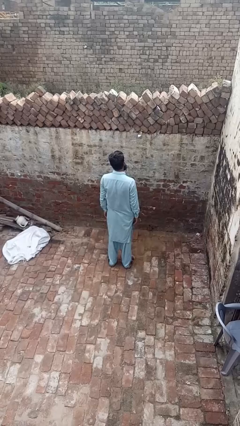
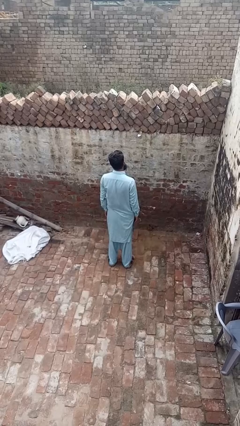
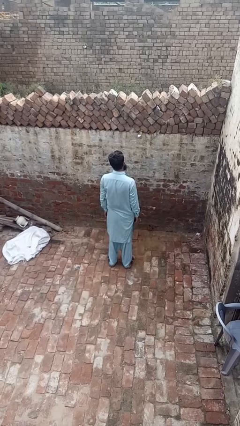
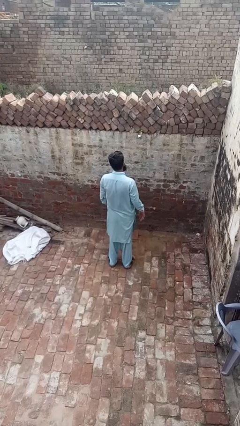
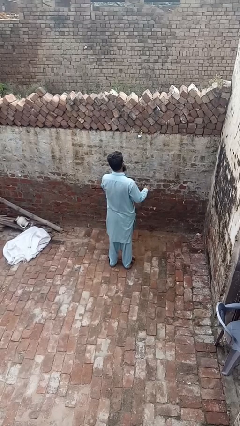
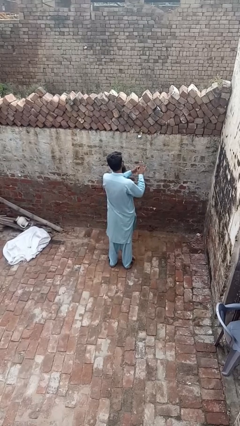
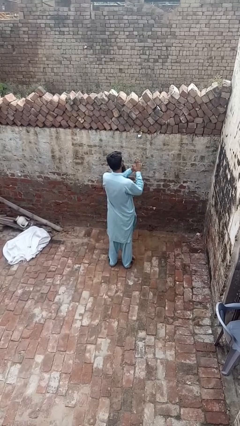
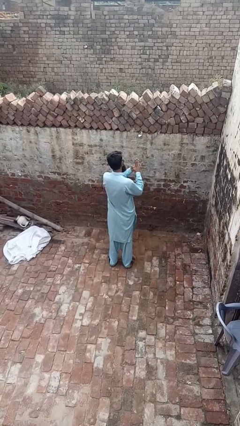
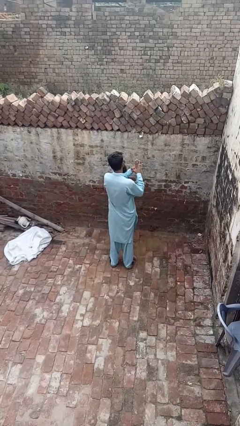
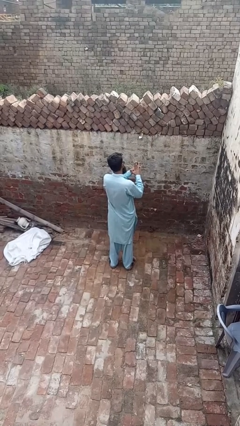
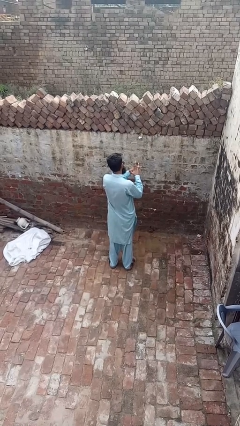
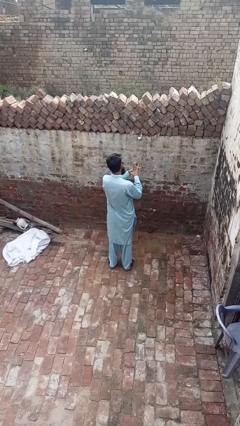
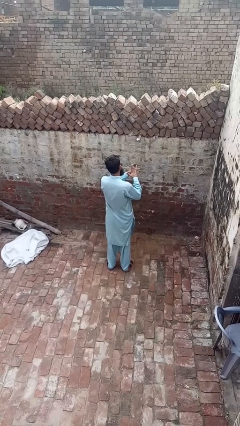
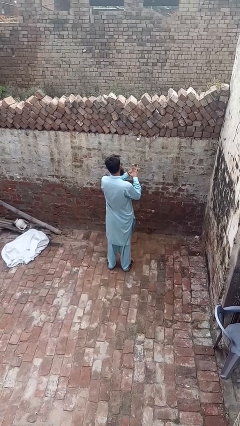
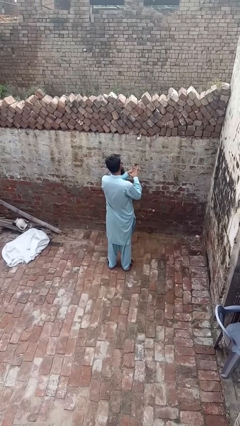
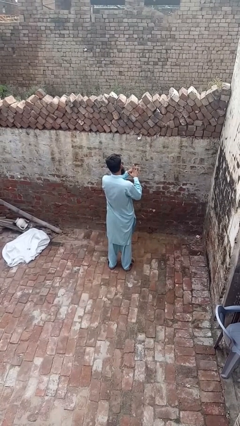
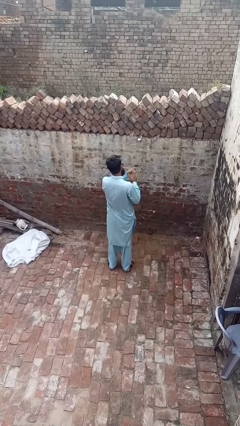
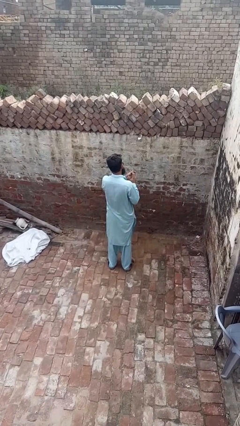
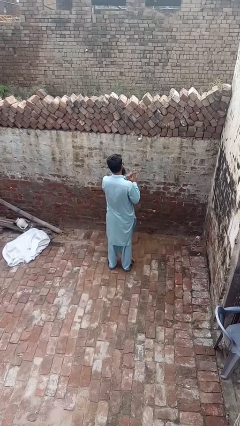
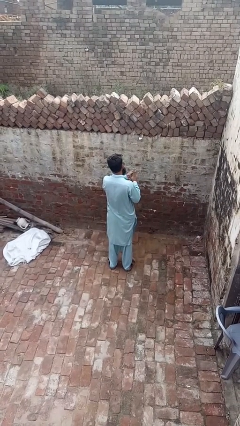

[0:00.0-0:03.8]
person takes off ring

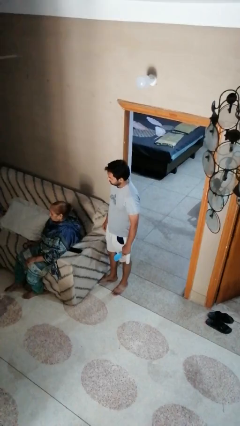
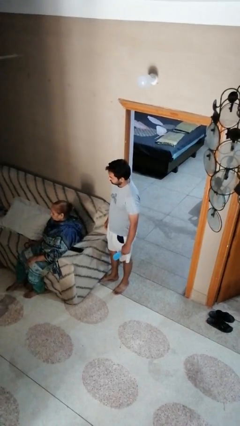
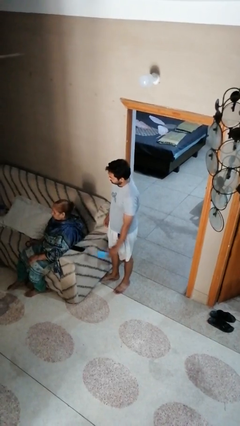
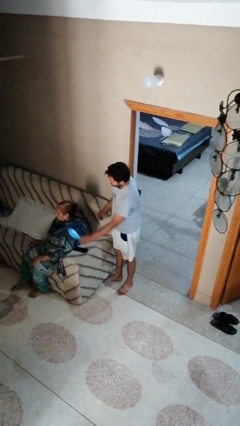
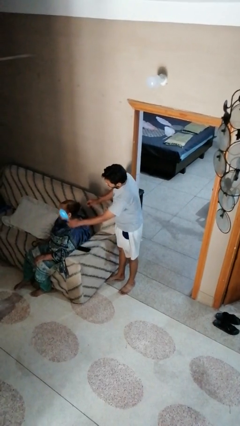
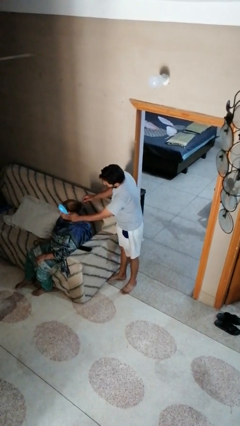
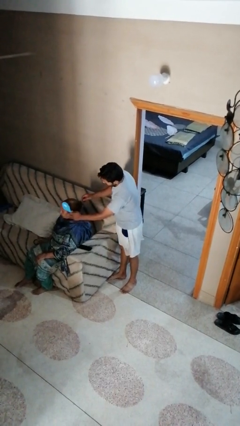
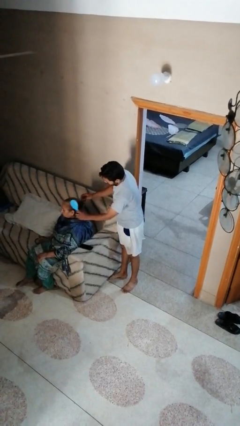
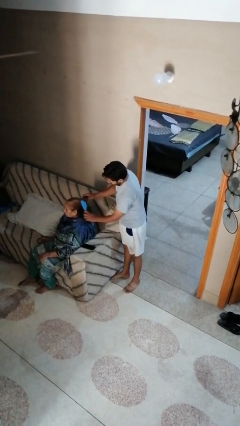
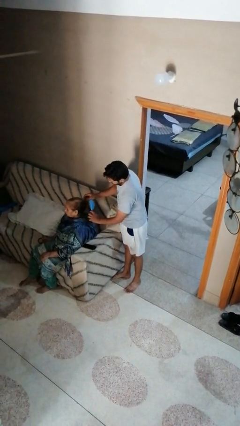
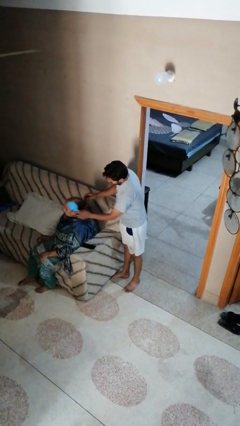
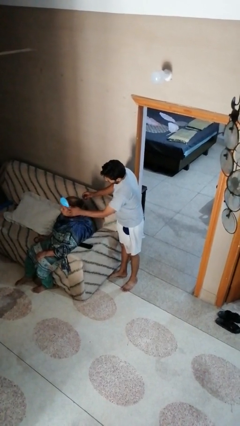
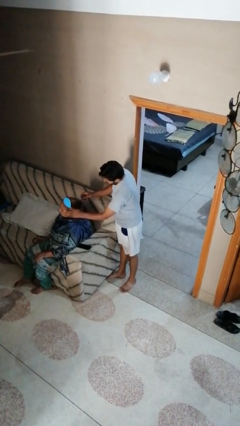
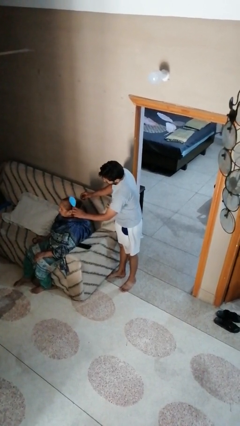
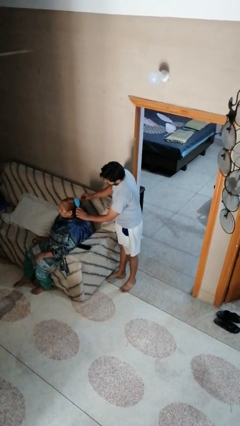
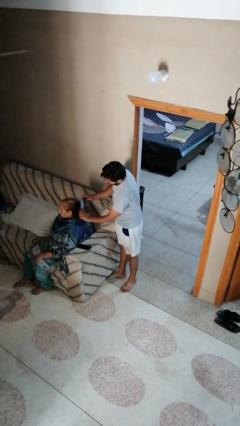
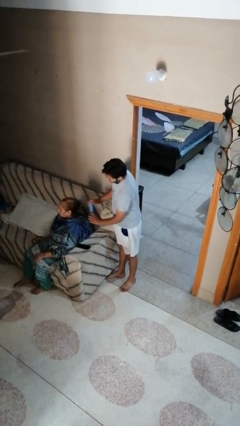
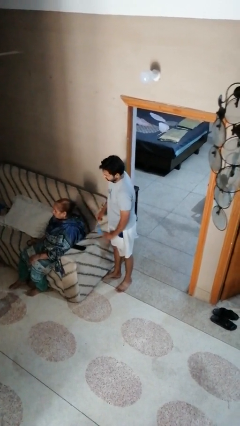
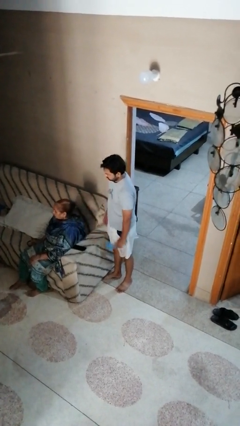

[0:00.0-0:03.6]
person brushes hair of person

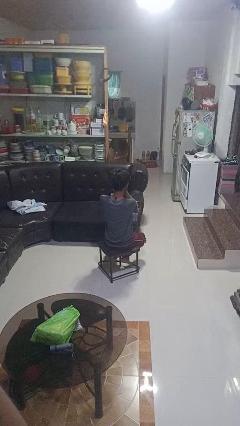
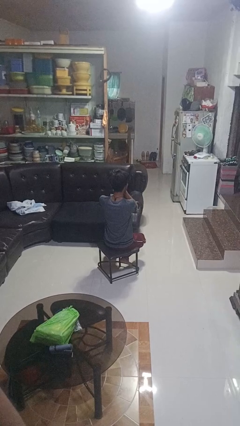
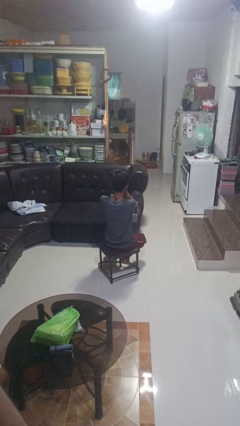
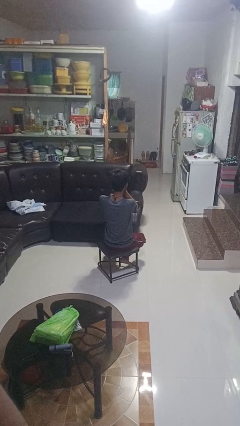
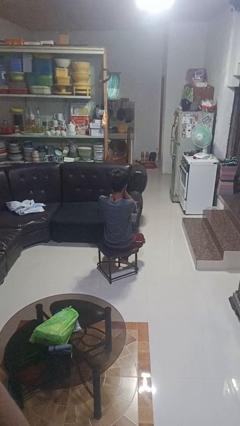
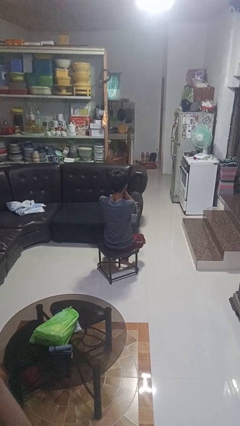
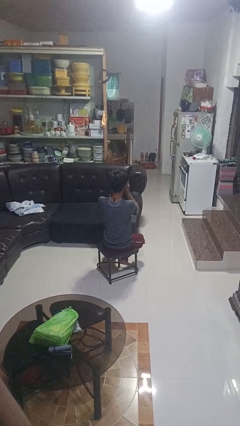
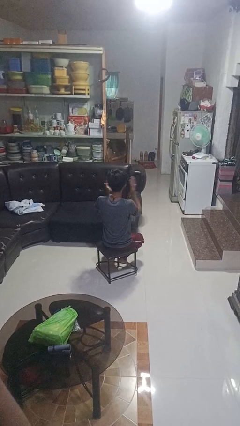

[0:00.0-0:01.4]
person covers face with hands

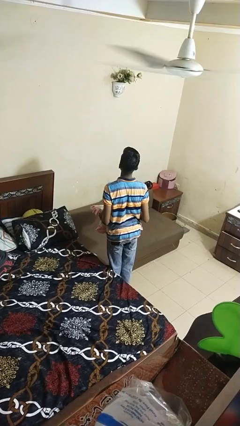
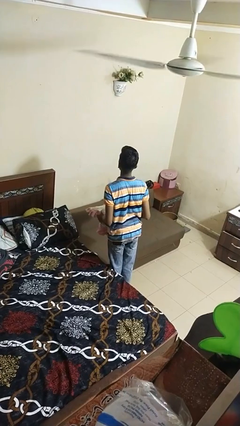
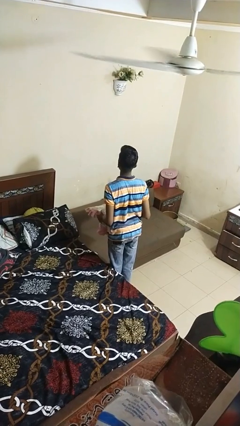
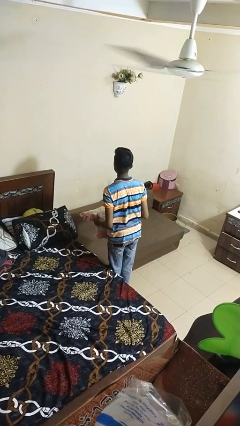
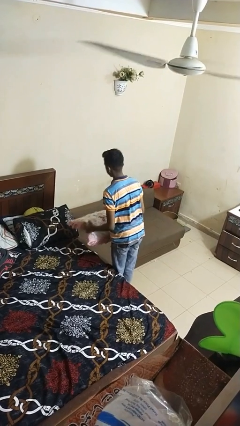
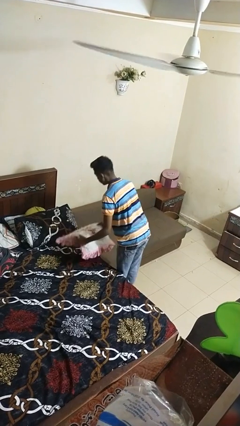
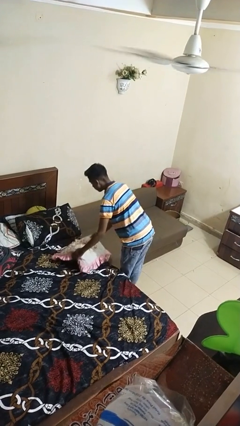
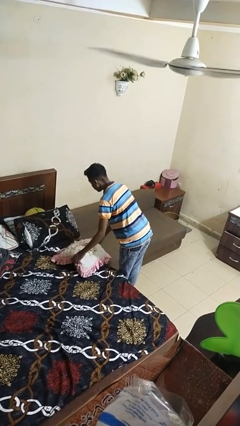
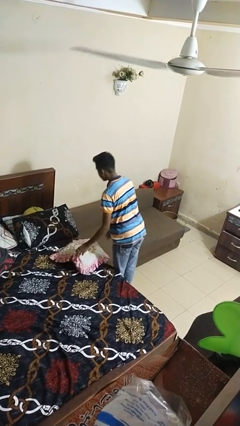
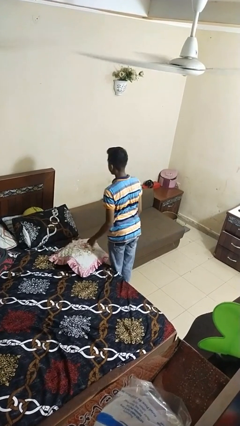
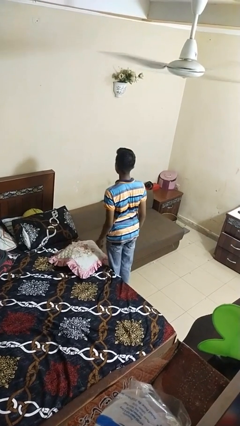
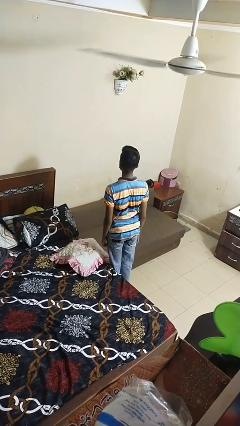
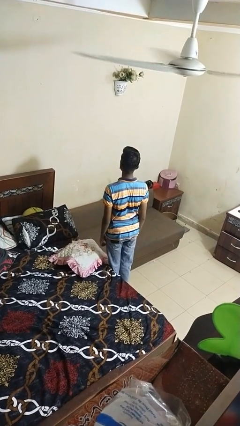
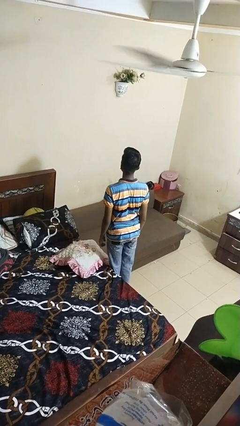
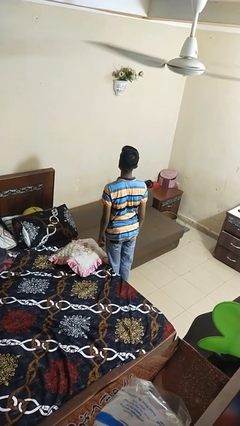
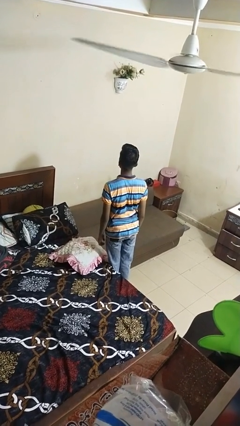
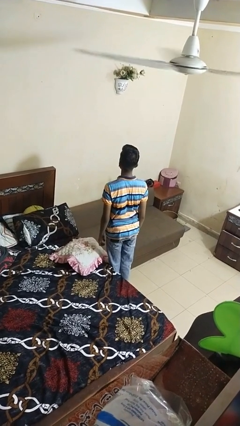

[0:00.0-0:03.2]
person puts down object on bed

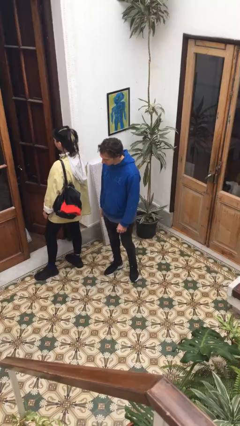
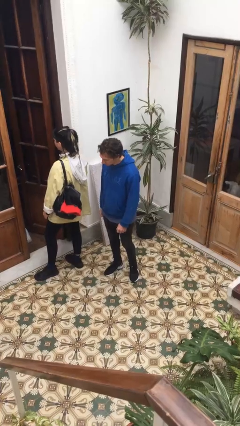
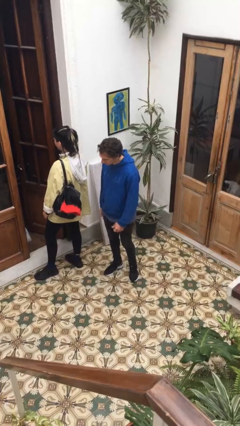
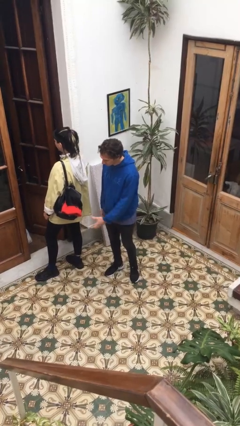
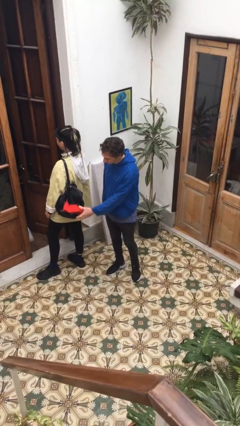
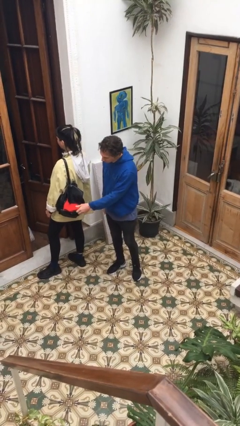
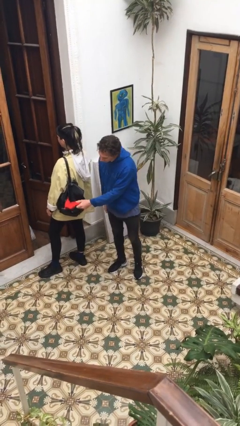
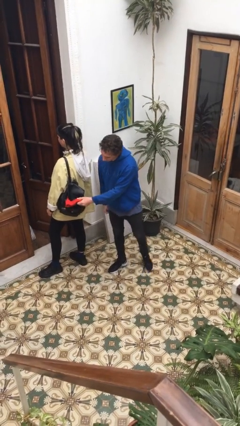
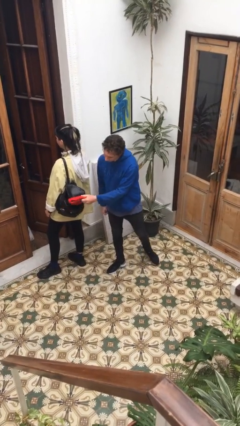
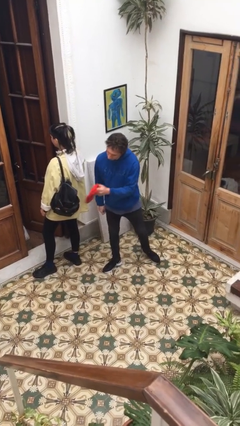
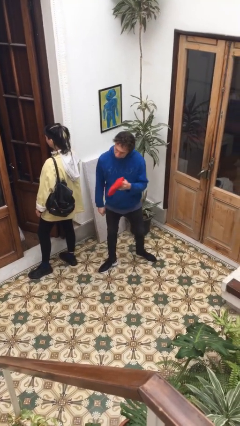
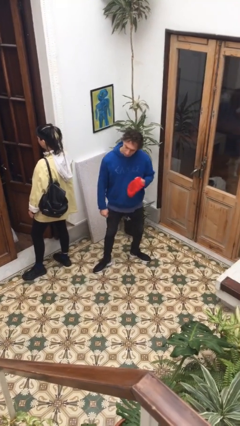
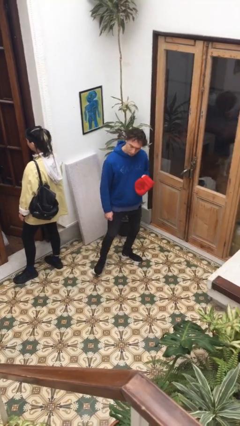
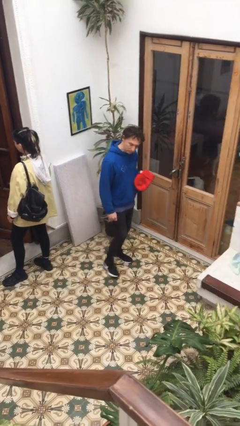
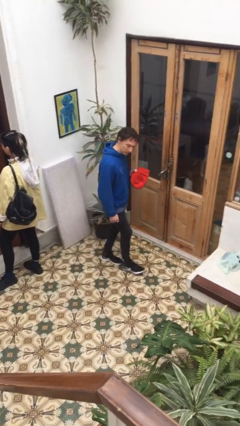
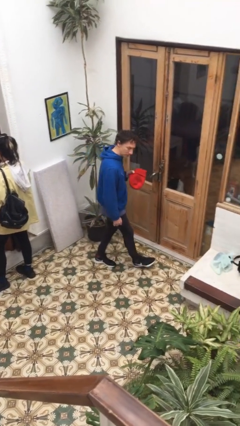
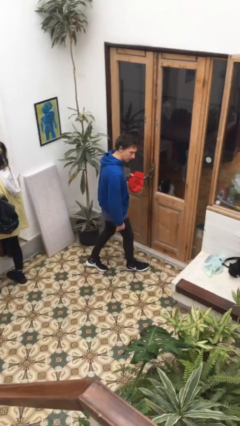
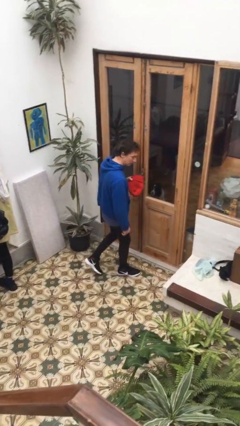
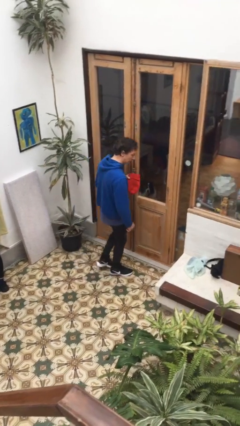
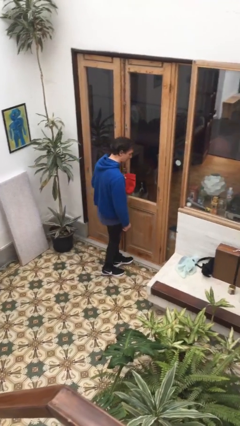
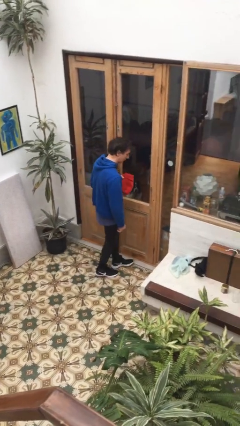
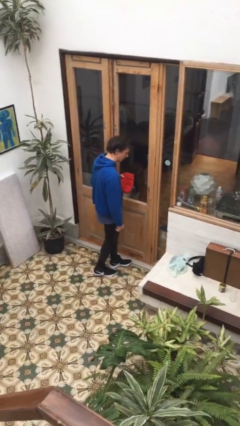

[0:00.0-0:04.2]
person steals object from person

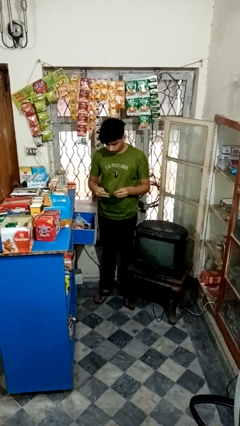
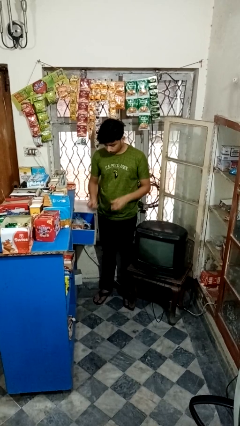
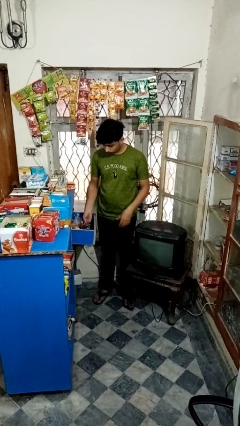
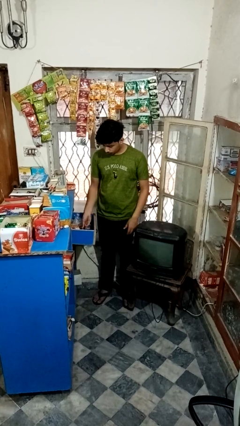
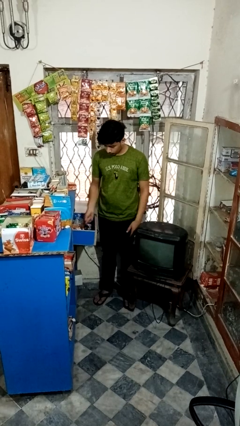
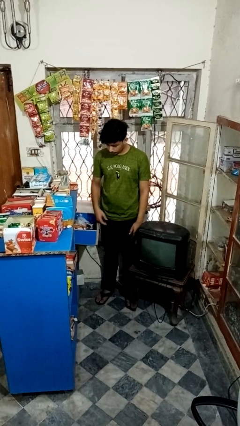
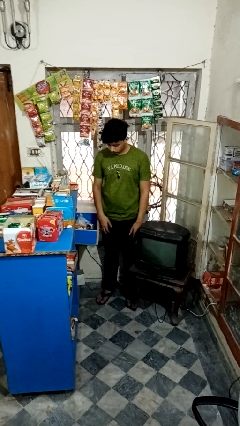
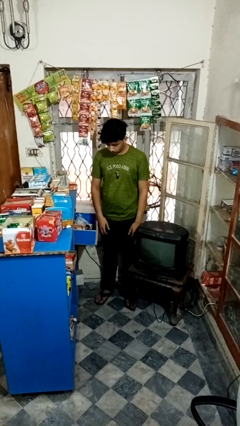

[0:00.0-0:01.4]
person puts object into kitchen drawer
